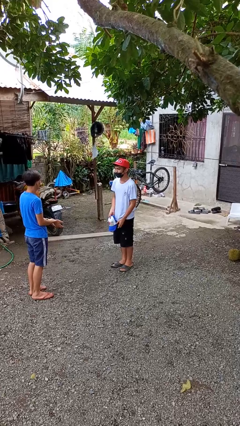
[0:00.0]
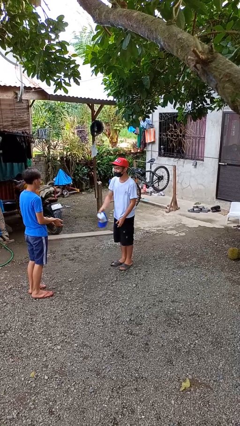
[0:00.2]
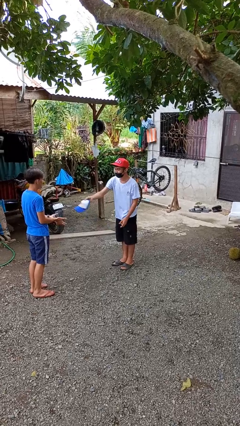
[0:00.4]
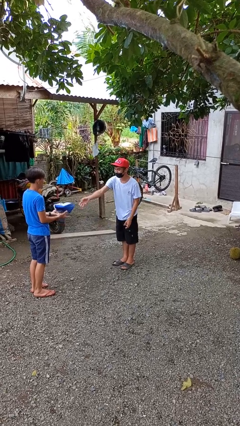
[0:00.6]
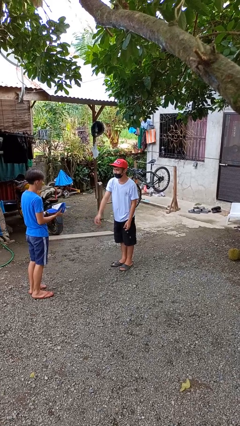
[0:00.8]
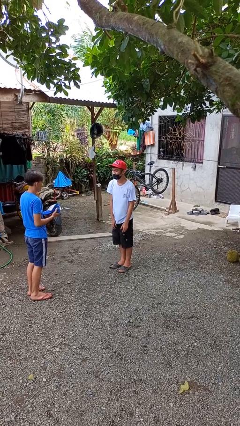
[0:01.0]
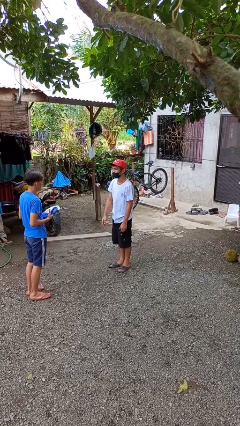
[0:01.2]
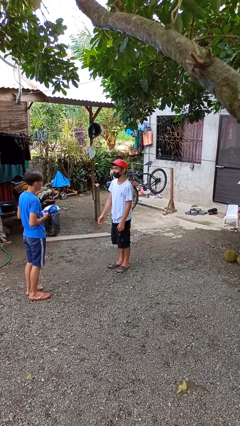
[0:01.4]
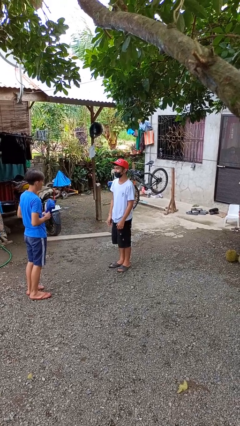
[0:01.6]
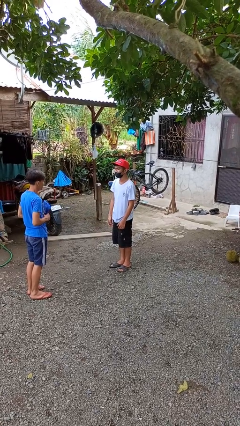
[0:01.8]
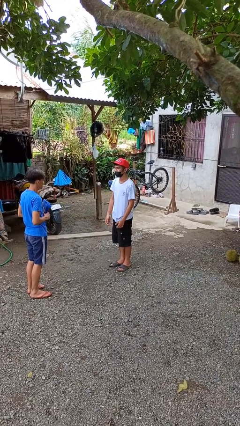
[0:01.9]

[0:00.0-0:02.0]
person throws object to person

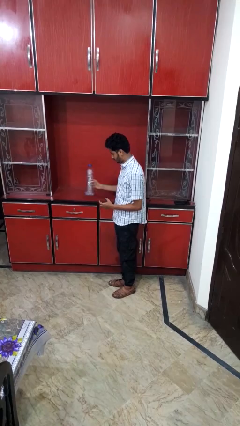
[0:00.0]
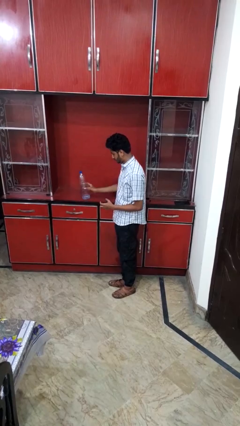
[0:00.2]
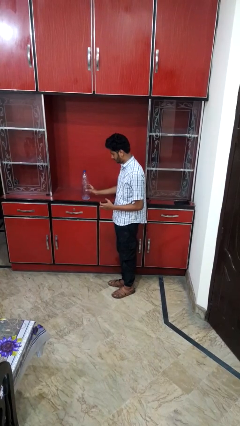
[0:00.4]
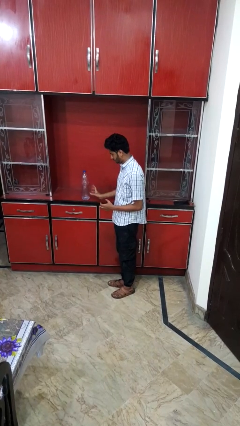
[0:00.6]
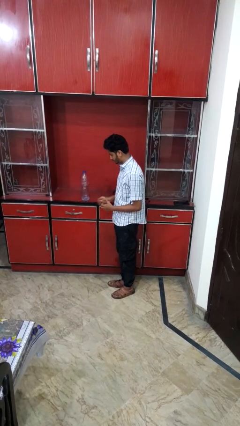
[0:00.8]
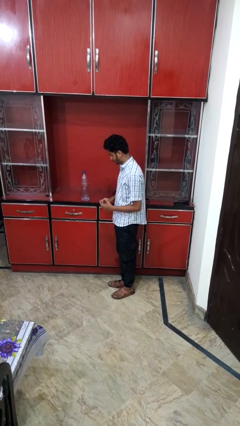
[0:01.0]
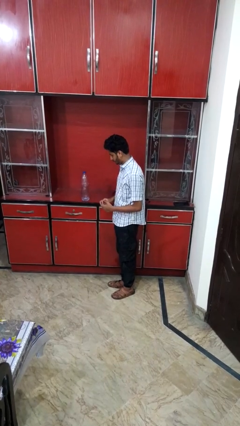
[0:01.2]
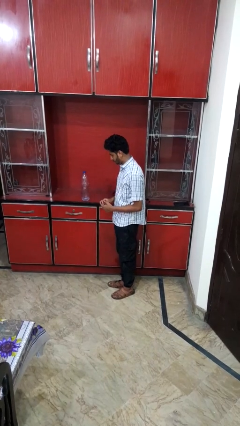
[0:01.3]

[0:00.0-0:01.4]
person puts down object on countertop

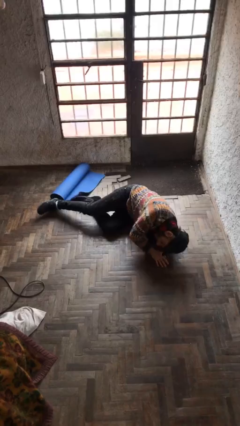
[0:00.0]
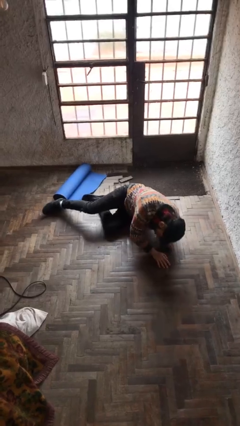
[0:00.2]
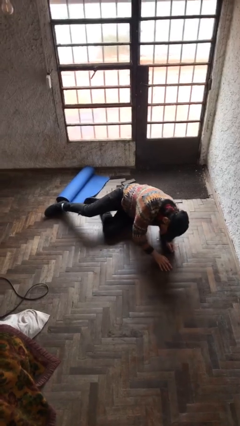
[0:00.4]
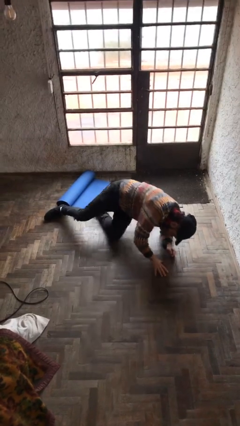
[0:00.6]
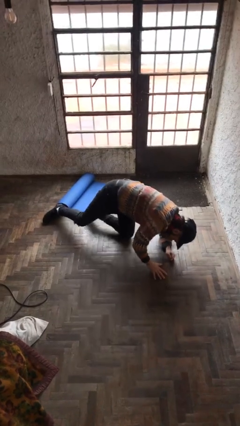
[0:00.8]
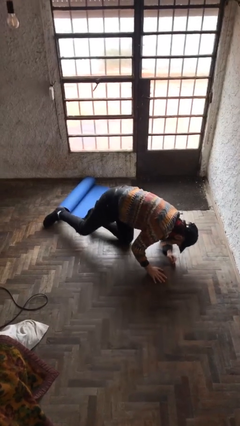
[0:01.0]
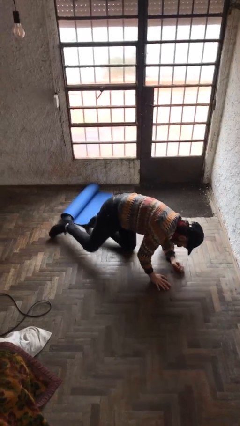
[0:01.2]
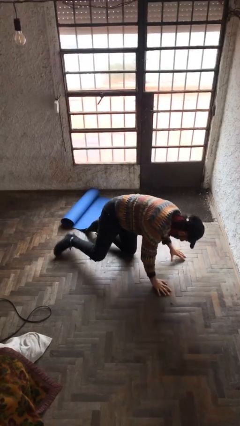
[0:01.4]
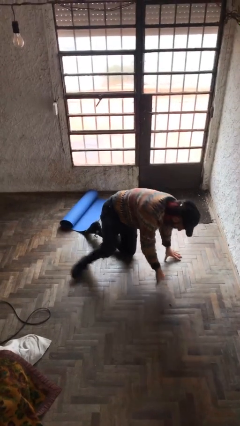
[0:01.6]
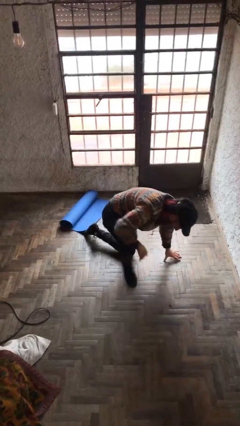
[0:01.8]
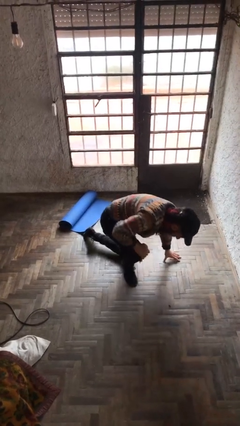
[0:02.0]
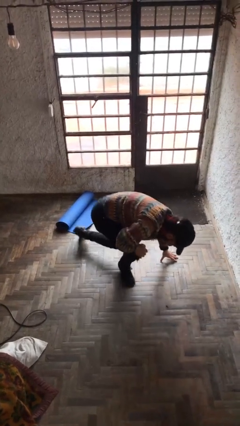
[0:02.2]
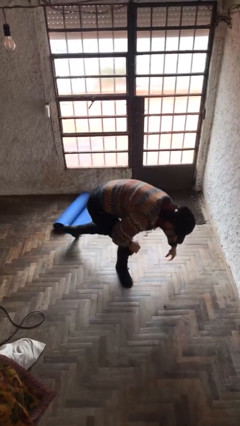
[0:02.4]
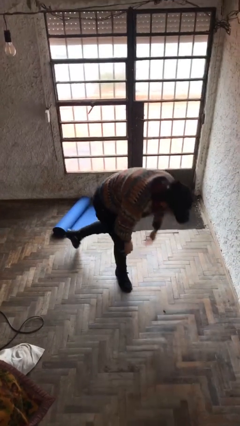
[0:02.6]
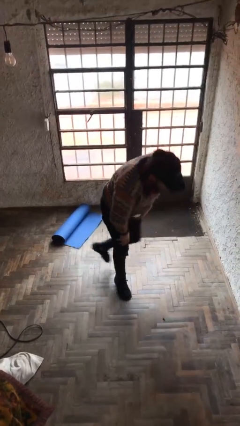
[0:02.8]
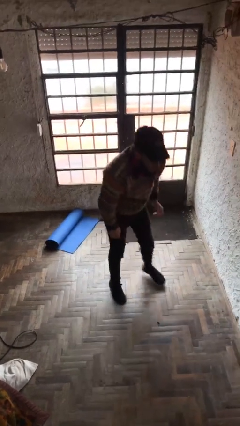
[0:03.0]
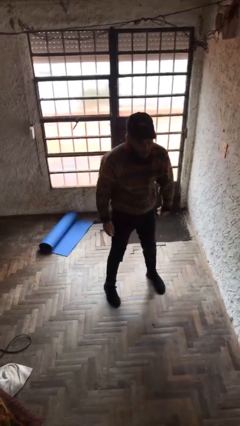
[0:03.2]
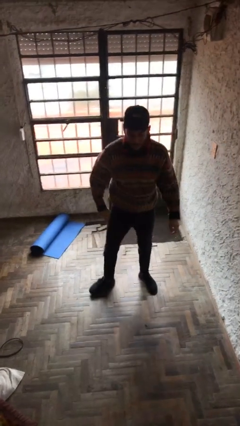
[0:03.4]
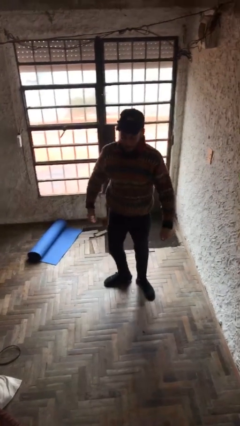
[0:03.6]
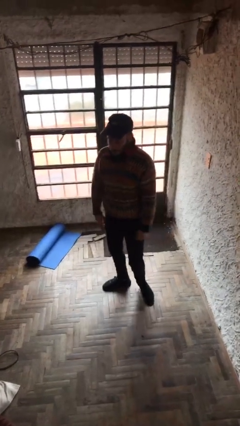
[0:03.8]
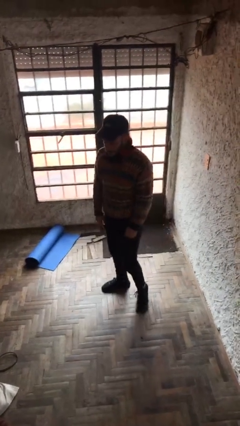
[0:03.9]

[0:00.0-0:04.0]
person stands up from floor

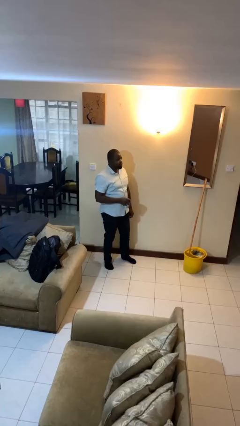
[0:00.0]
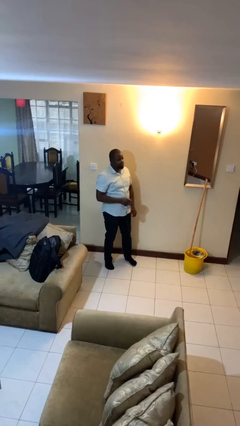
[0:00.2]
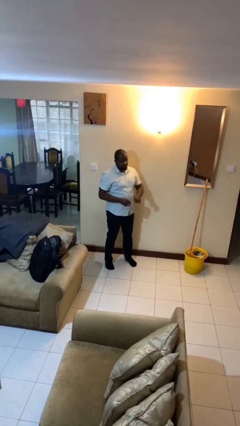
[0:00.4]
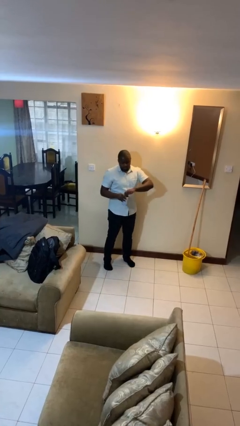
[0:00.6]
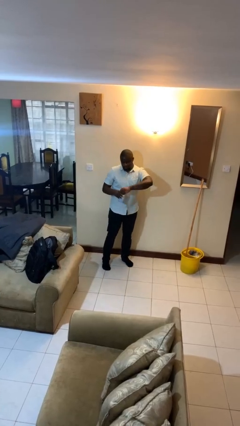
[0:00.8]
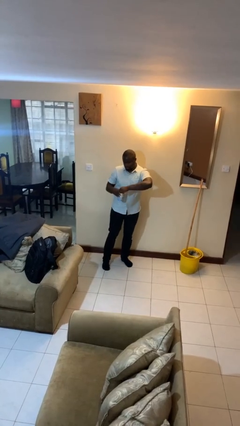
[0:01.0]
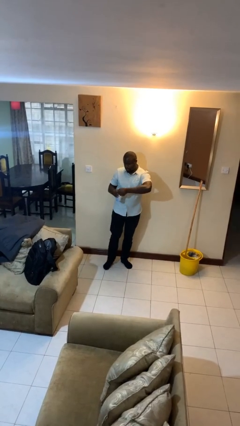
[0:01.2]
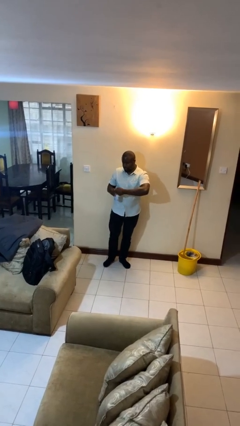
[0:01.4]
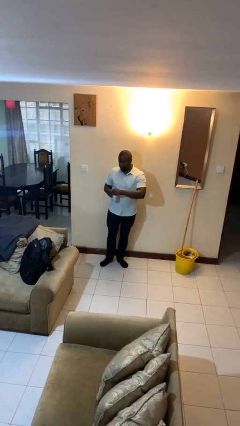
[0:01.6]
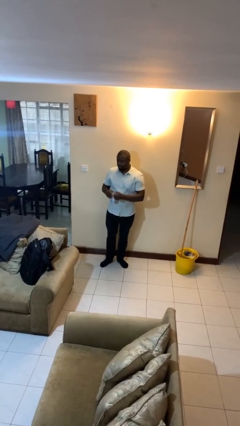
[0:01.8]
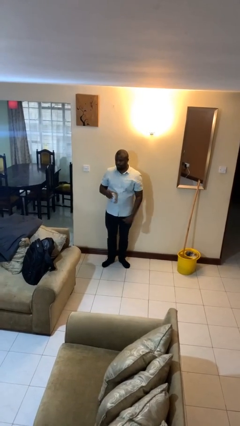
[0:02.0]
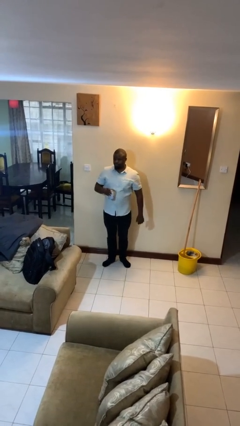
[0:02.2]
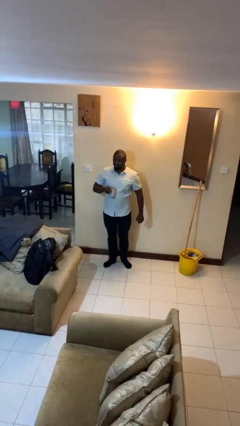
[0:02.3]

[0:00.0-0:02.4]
person opens beverage can

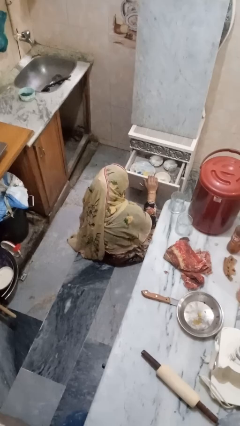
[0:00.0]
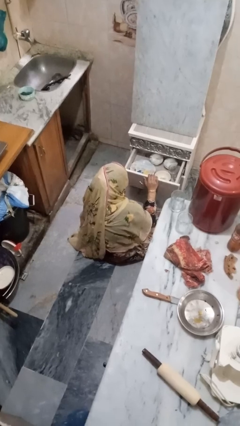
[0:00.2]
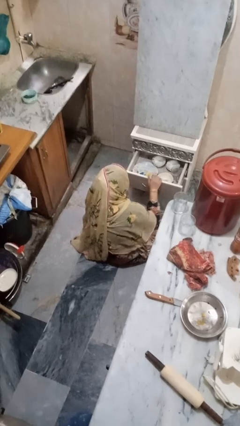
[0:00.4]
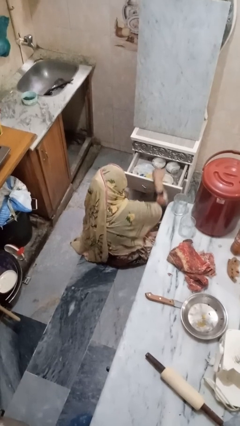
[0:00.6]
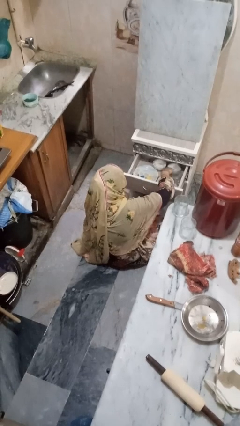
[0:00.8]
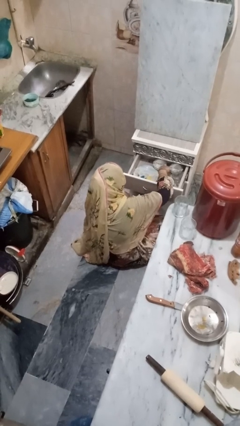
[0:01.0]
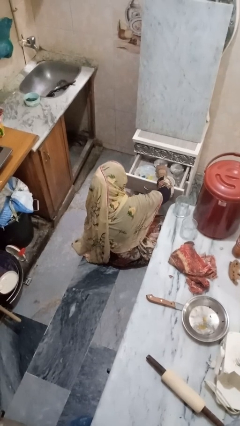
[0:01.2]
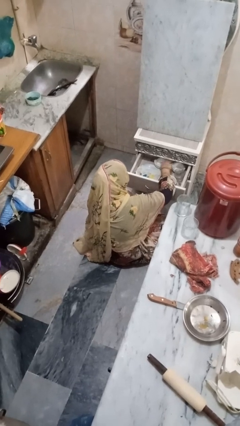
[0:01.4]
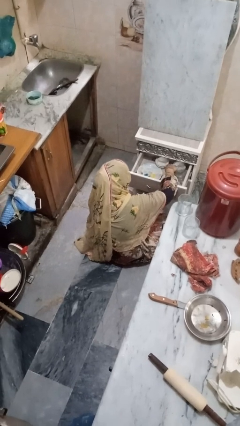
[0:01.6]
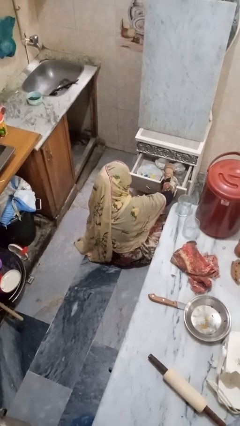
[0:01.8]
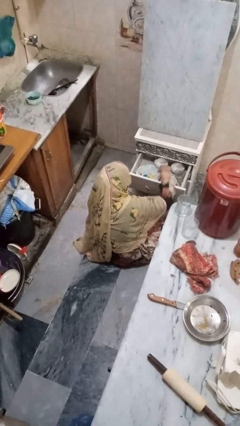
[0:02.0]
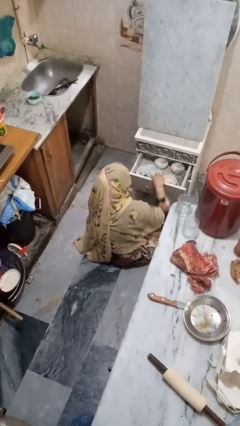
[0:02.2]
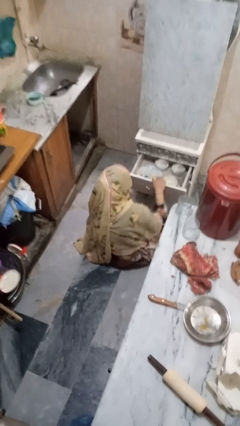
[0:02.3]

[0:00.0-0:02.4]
person searches in kitchen drawer

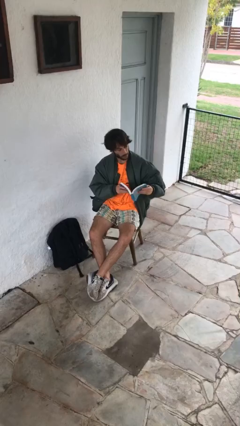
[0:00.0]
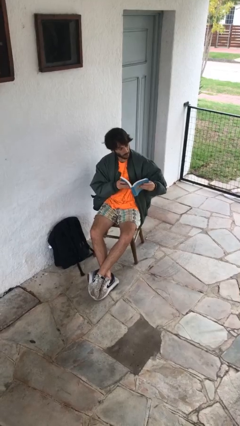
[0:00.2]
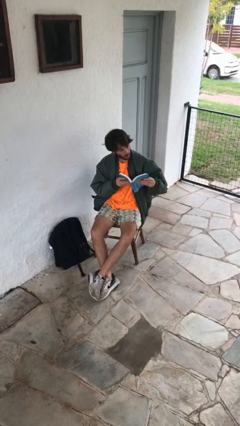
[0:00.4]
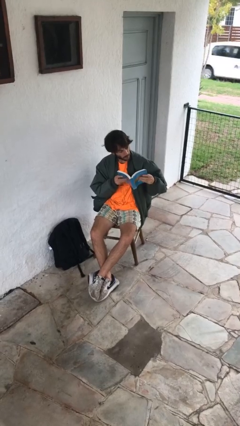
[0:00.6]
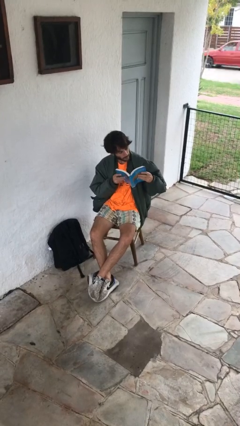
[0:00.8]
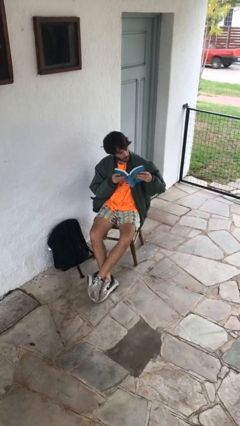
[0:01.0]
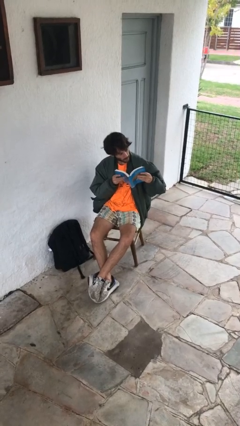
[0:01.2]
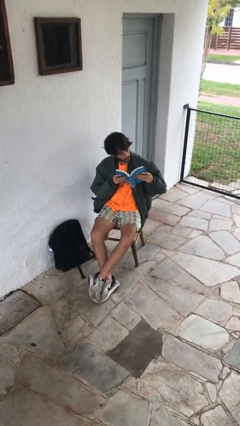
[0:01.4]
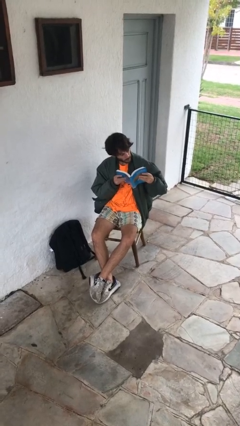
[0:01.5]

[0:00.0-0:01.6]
person reads document

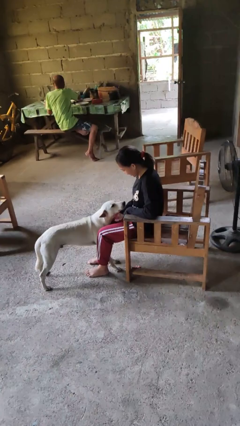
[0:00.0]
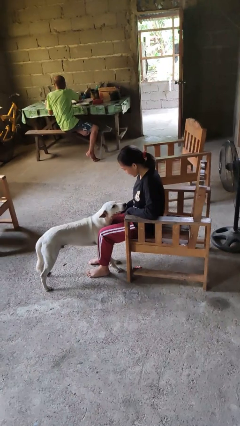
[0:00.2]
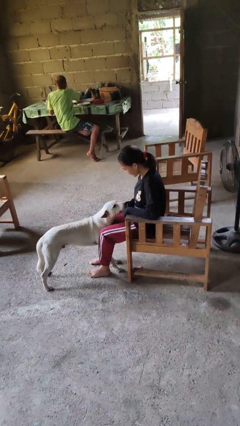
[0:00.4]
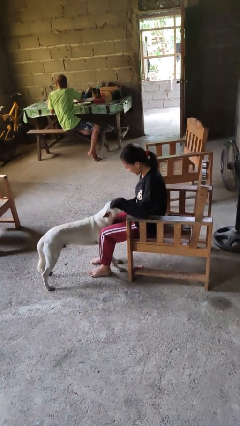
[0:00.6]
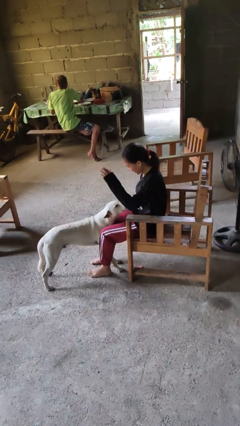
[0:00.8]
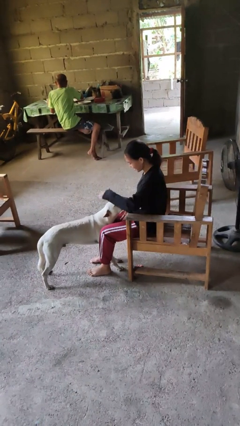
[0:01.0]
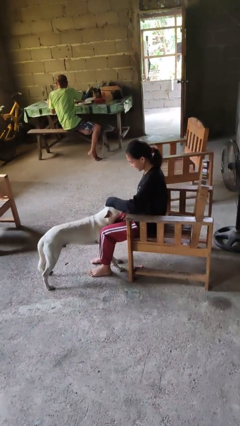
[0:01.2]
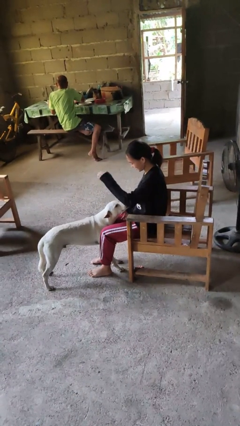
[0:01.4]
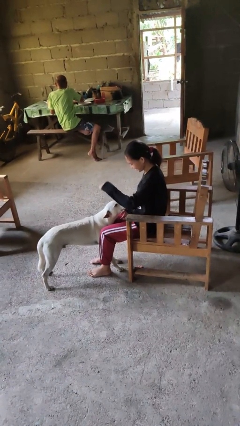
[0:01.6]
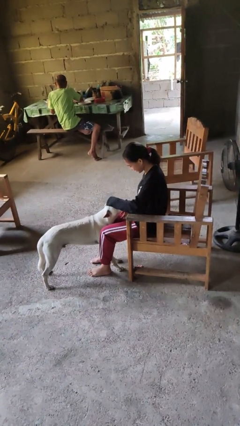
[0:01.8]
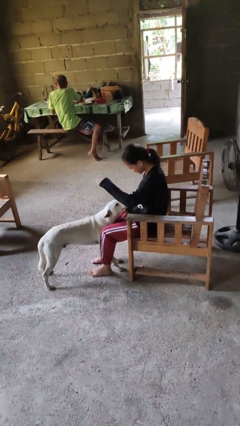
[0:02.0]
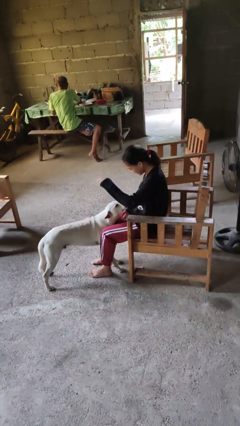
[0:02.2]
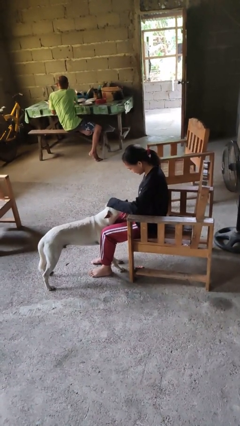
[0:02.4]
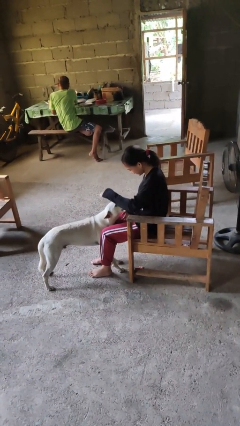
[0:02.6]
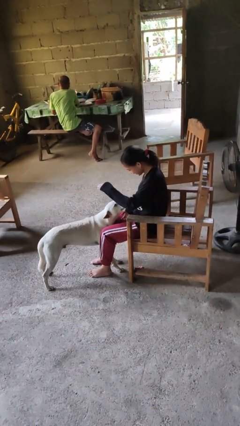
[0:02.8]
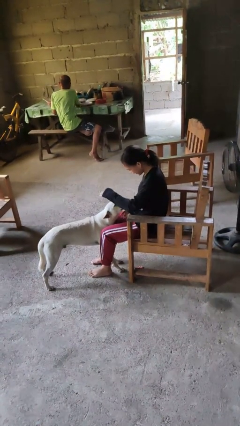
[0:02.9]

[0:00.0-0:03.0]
person pets dog
